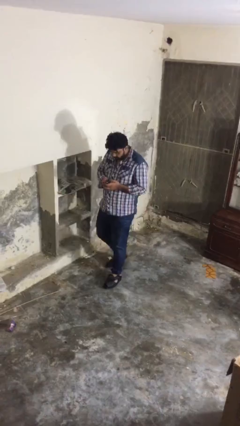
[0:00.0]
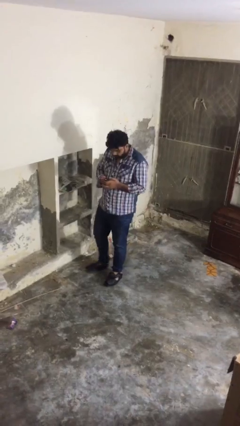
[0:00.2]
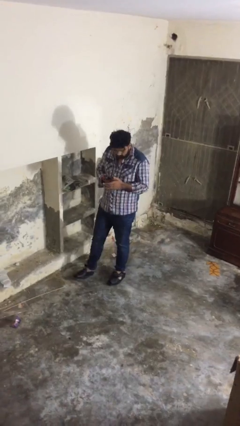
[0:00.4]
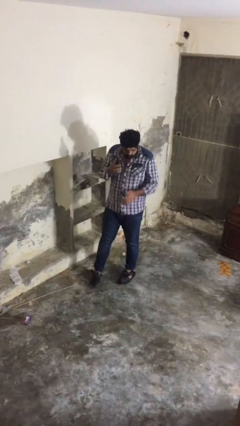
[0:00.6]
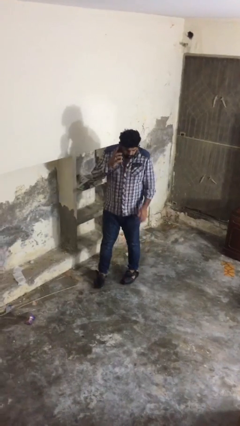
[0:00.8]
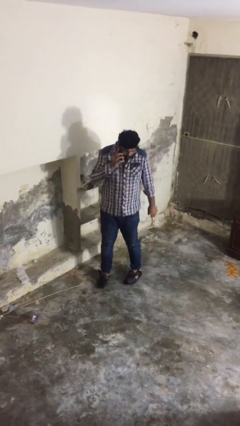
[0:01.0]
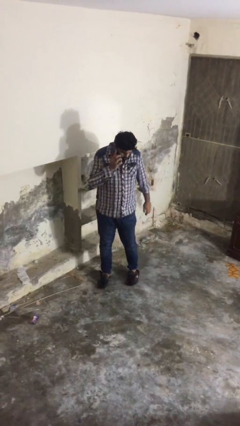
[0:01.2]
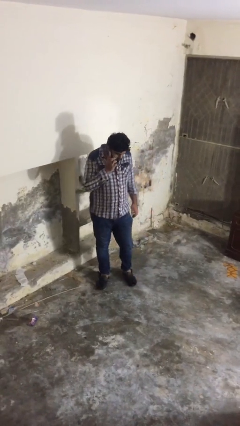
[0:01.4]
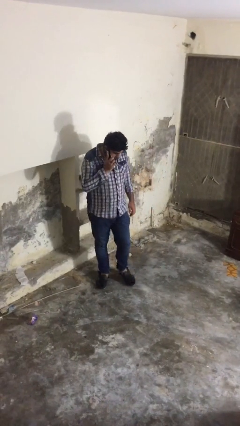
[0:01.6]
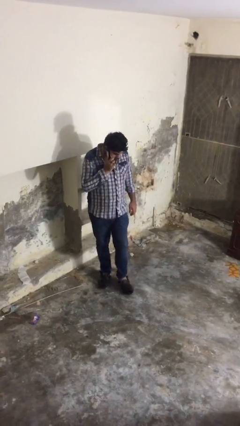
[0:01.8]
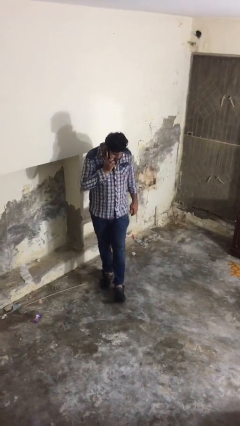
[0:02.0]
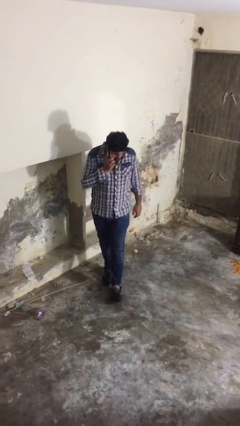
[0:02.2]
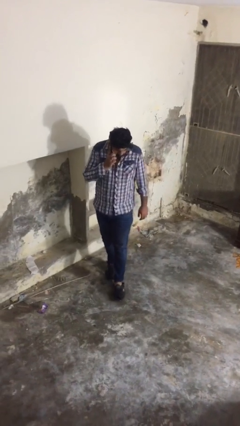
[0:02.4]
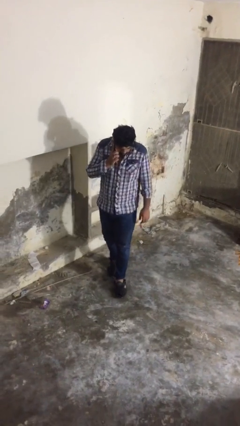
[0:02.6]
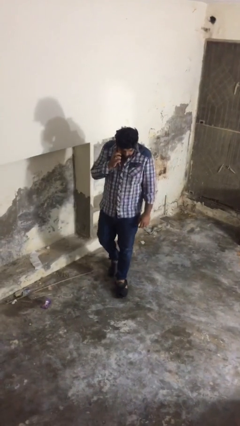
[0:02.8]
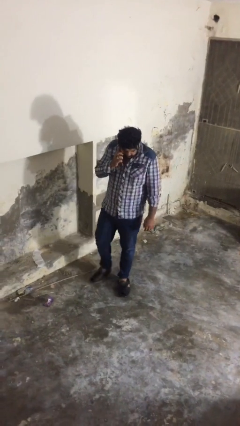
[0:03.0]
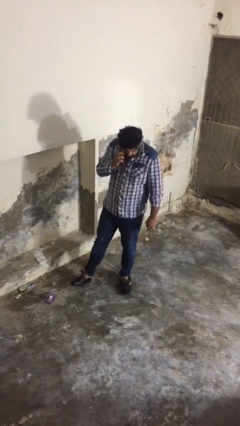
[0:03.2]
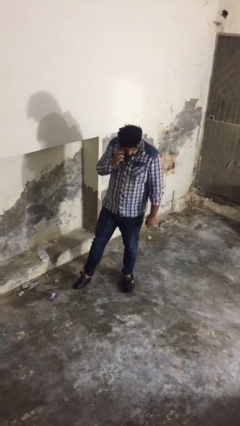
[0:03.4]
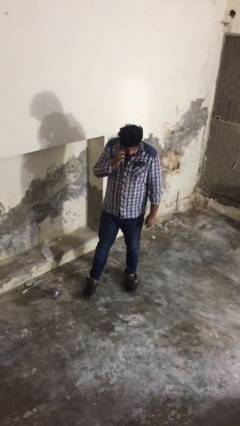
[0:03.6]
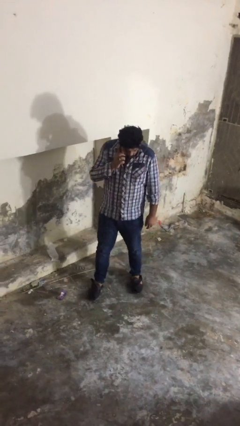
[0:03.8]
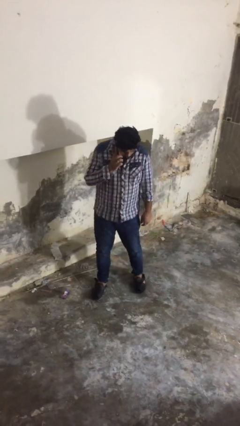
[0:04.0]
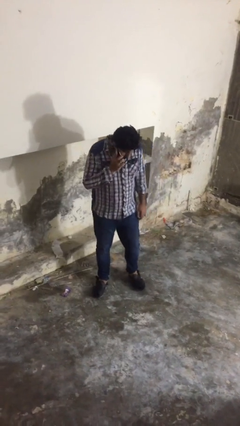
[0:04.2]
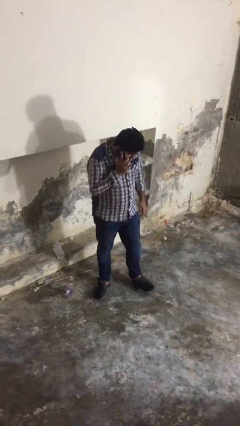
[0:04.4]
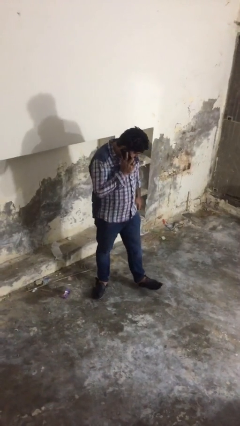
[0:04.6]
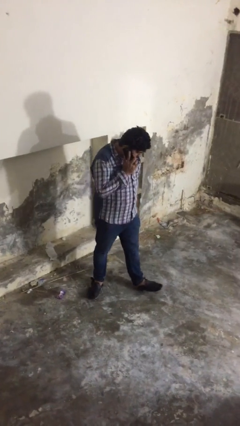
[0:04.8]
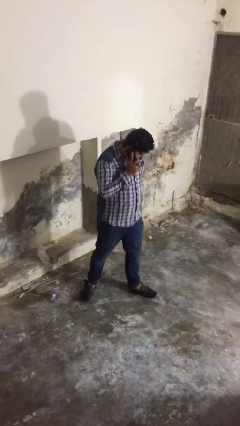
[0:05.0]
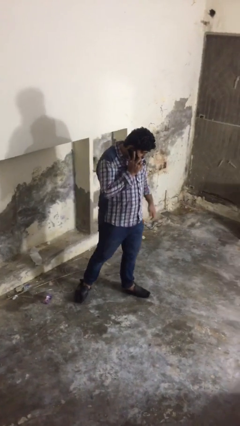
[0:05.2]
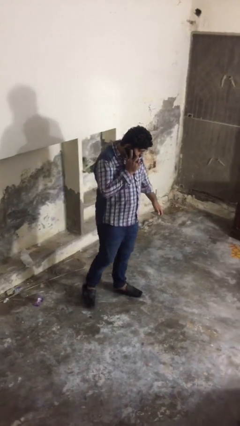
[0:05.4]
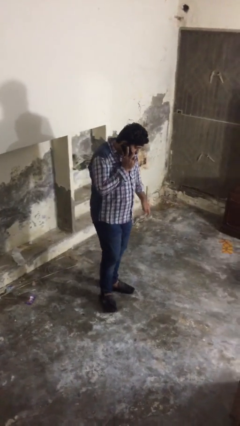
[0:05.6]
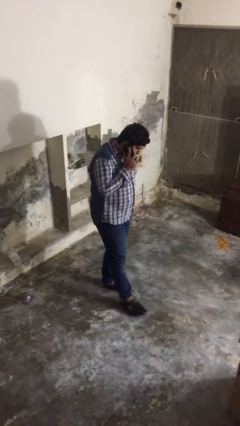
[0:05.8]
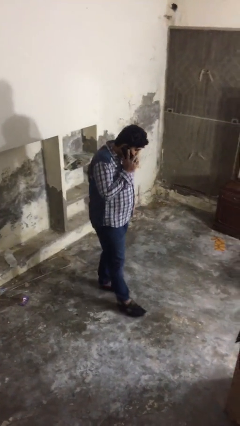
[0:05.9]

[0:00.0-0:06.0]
person talks on phone

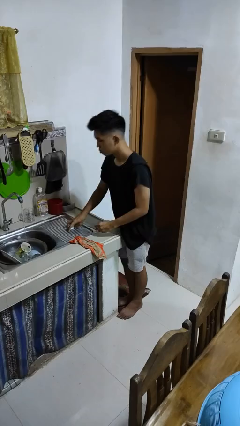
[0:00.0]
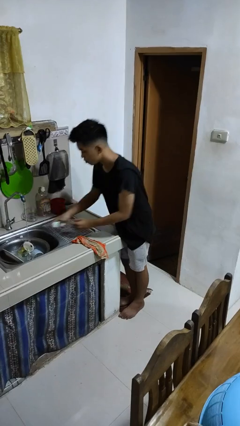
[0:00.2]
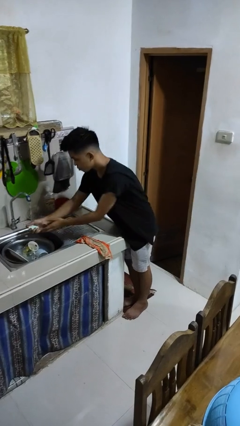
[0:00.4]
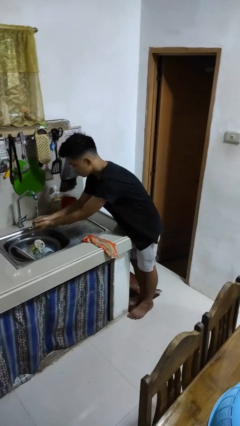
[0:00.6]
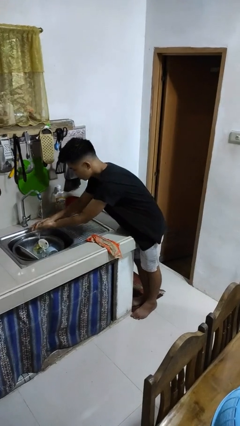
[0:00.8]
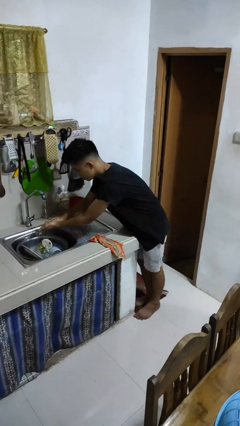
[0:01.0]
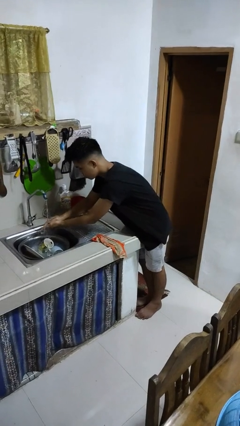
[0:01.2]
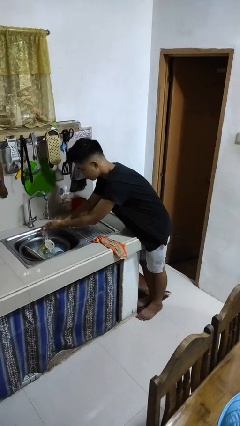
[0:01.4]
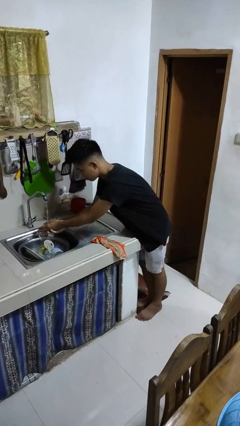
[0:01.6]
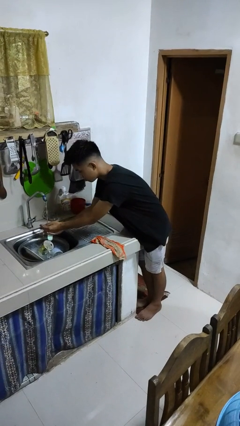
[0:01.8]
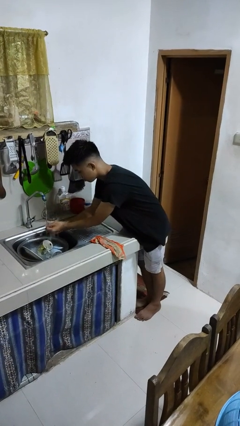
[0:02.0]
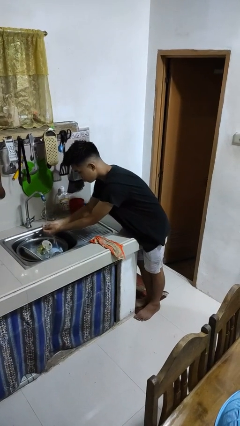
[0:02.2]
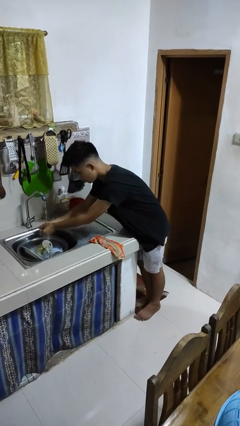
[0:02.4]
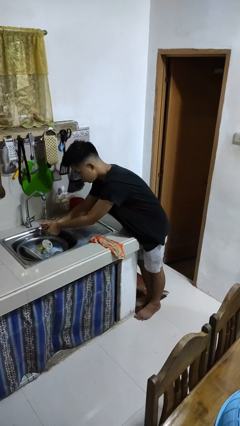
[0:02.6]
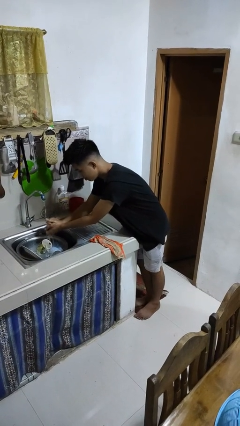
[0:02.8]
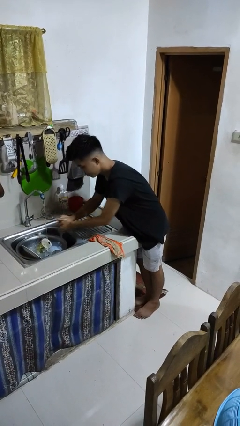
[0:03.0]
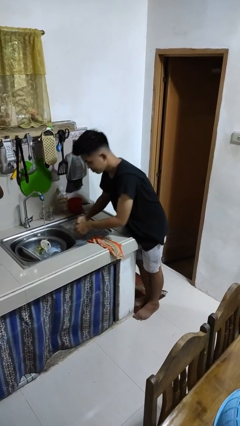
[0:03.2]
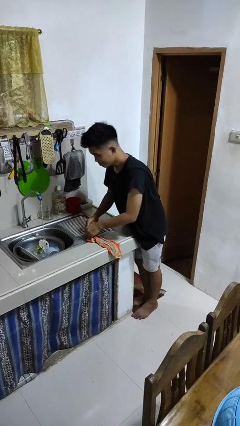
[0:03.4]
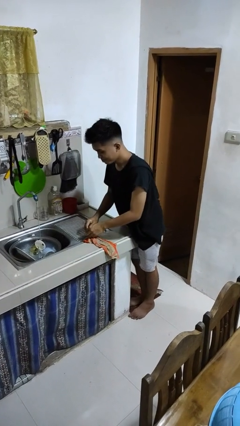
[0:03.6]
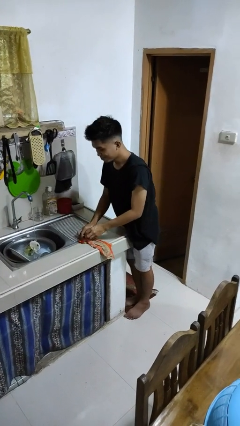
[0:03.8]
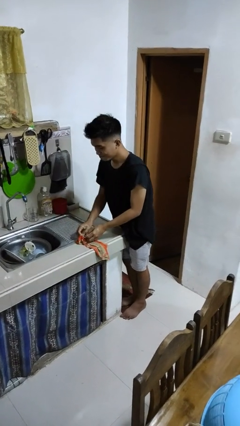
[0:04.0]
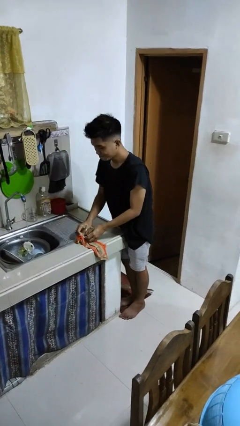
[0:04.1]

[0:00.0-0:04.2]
person washes hands

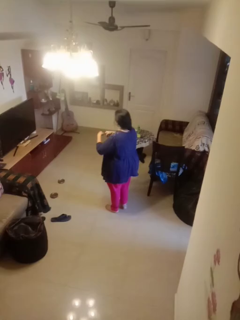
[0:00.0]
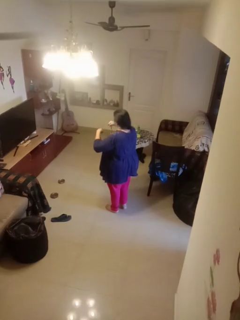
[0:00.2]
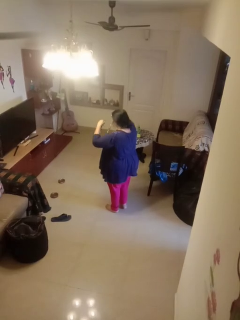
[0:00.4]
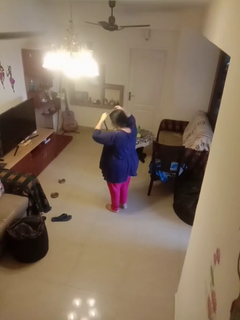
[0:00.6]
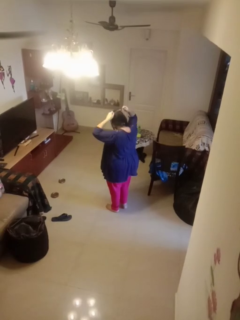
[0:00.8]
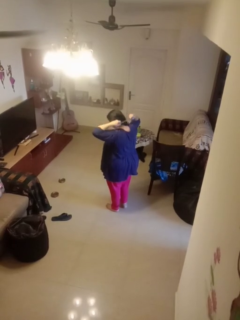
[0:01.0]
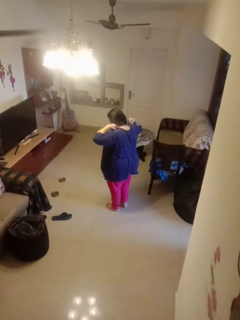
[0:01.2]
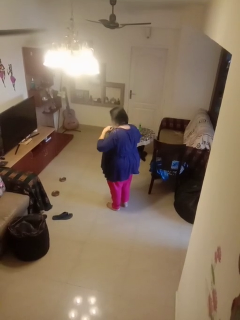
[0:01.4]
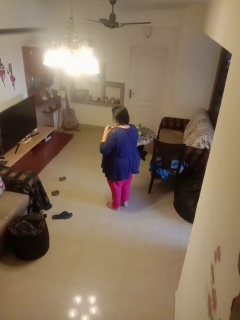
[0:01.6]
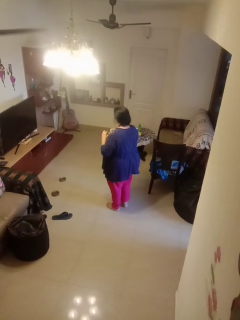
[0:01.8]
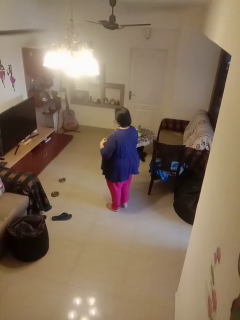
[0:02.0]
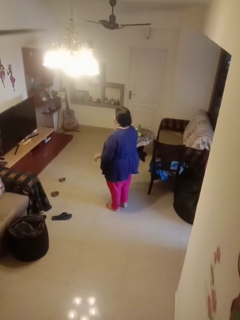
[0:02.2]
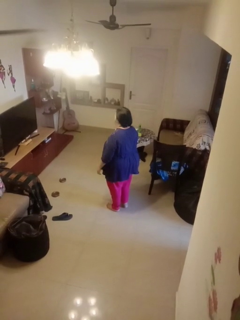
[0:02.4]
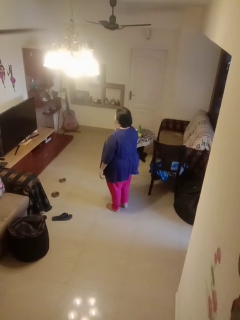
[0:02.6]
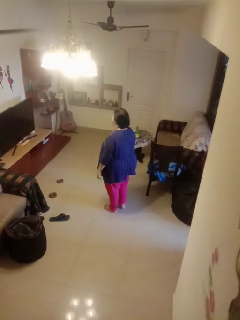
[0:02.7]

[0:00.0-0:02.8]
person puts on necklace

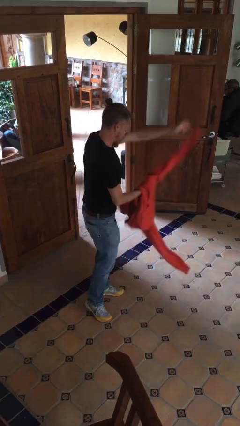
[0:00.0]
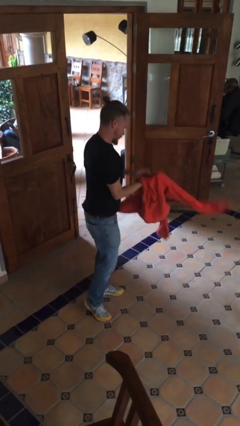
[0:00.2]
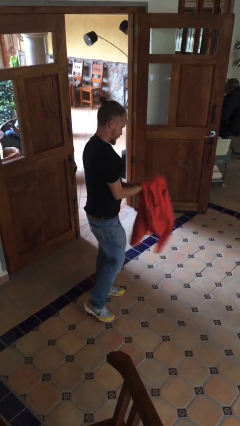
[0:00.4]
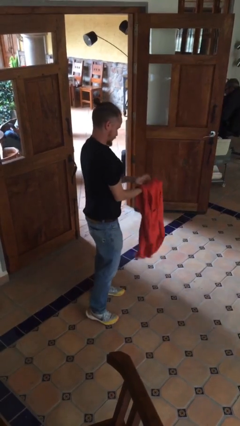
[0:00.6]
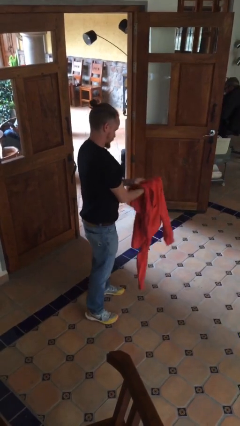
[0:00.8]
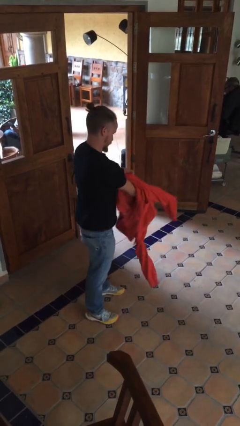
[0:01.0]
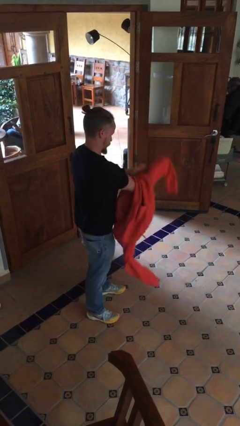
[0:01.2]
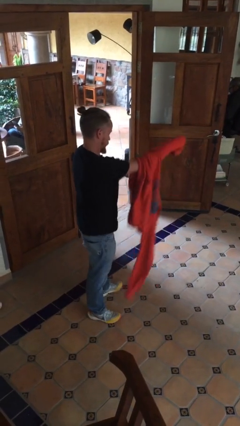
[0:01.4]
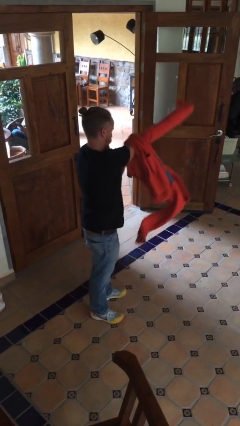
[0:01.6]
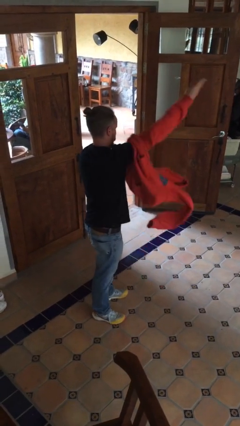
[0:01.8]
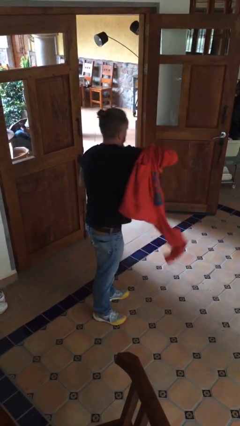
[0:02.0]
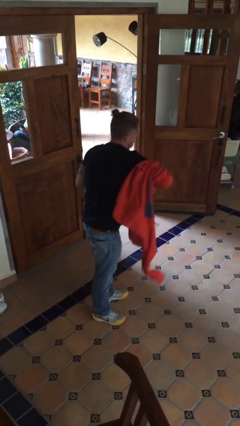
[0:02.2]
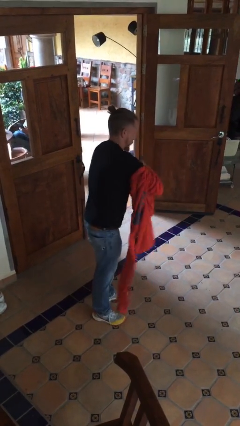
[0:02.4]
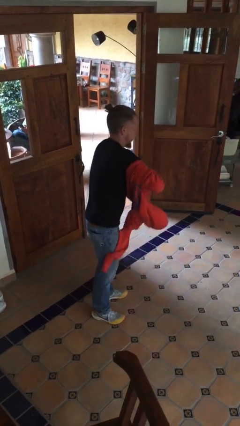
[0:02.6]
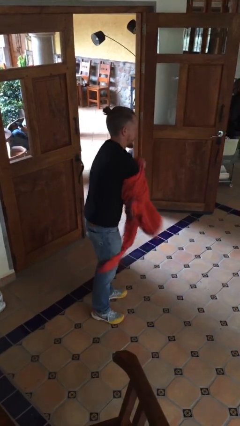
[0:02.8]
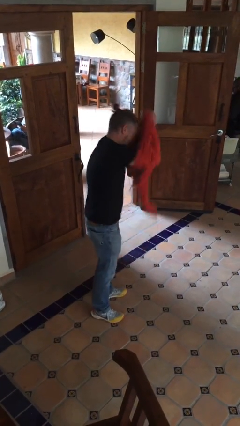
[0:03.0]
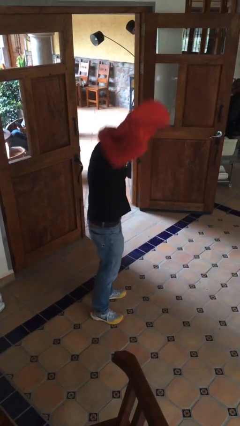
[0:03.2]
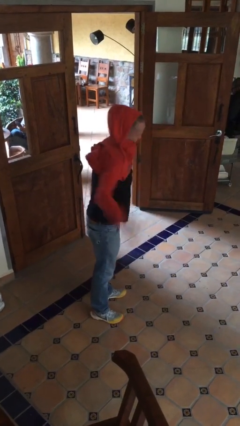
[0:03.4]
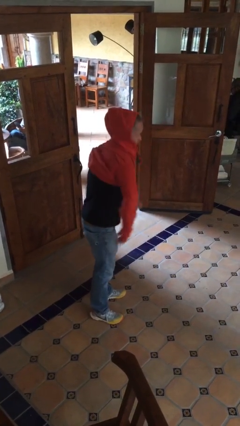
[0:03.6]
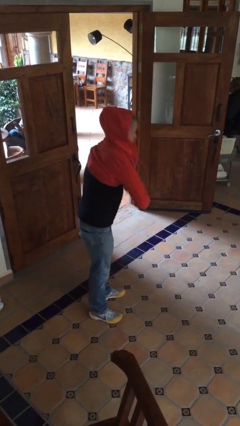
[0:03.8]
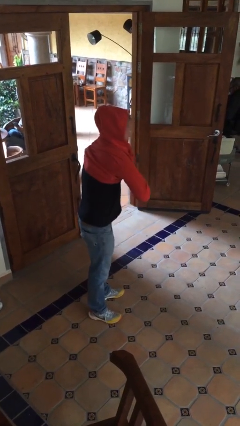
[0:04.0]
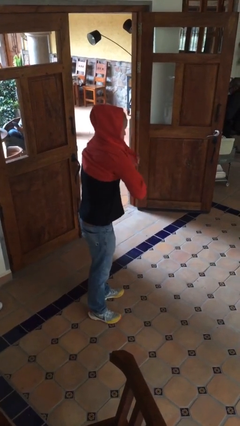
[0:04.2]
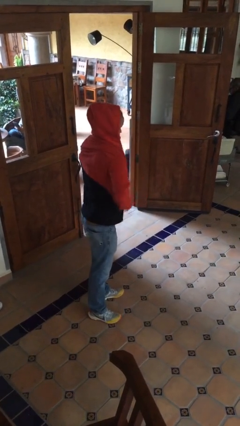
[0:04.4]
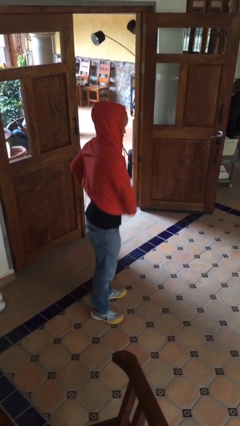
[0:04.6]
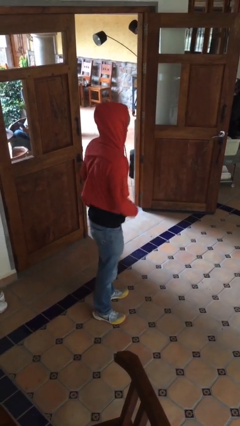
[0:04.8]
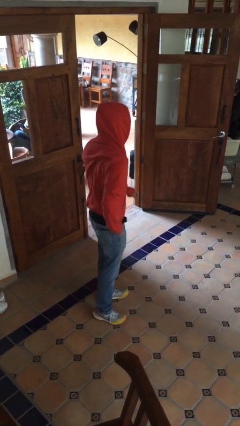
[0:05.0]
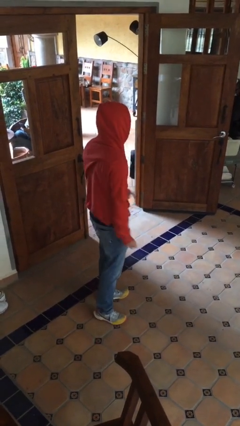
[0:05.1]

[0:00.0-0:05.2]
person puts on hoodie

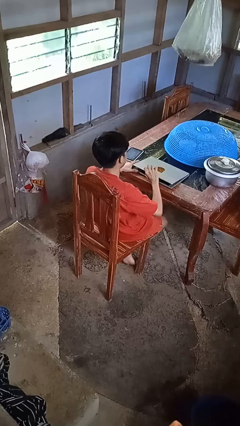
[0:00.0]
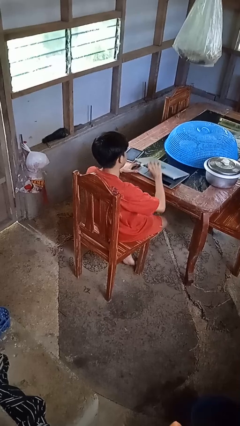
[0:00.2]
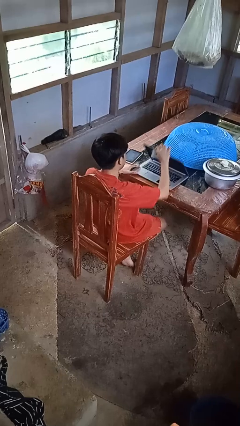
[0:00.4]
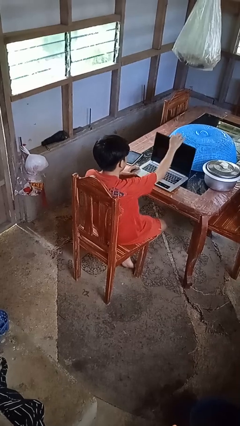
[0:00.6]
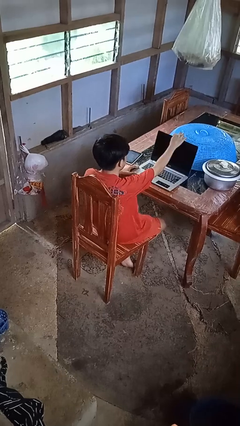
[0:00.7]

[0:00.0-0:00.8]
person opens laptop
